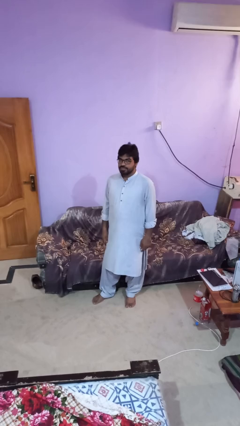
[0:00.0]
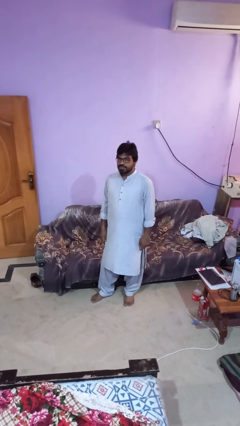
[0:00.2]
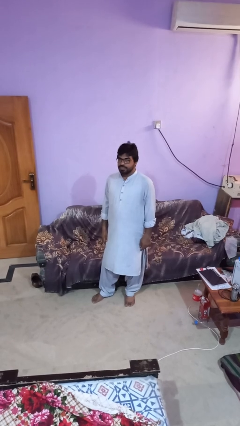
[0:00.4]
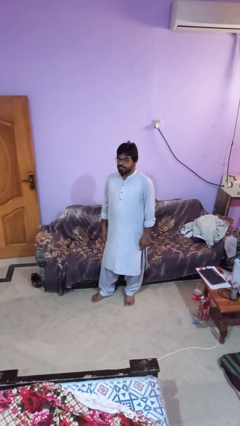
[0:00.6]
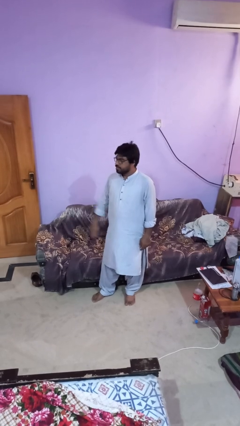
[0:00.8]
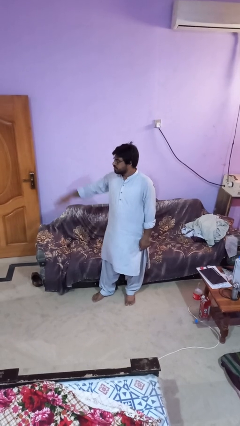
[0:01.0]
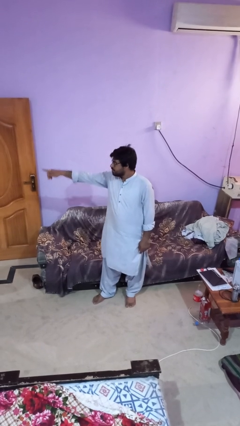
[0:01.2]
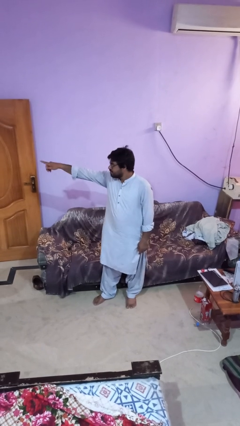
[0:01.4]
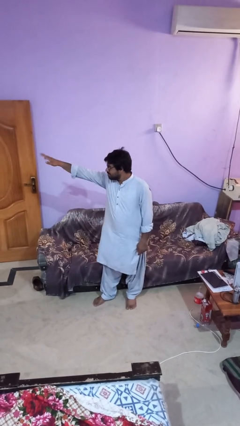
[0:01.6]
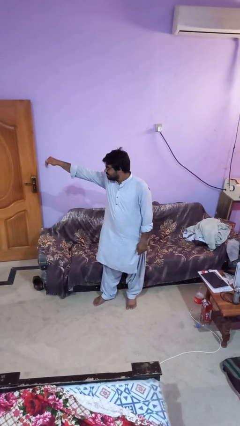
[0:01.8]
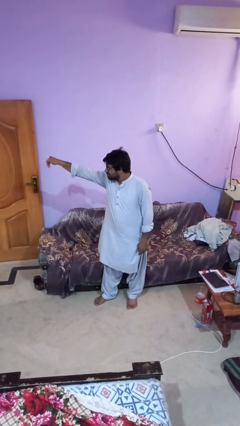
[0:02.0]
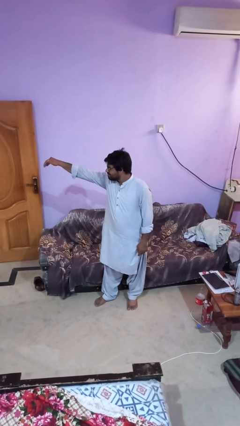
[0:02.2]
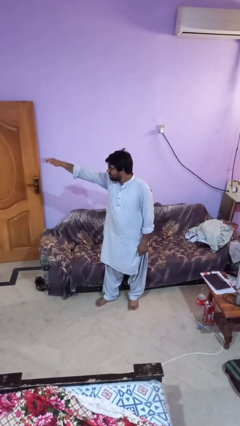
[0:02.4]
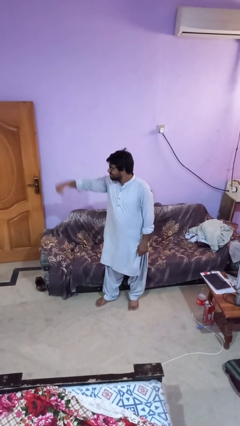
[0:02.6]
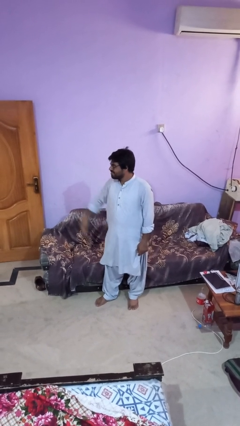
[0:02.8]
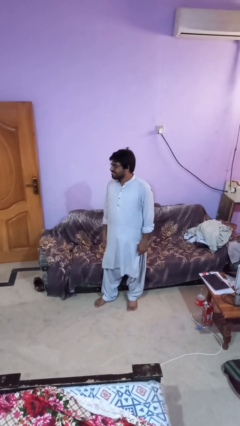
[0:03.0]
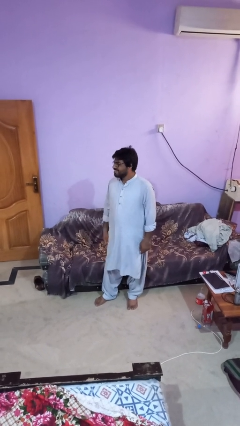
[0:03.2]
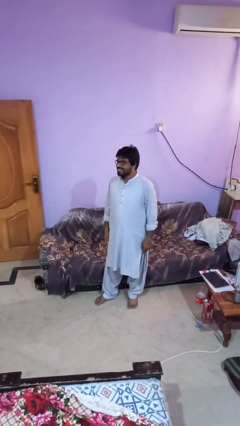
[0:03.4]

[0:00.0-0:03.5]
person gestures come here

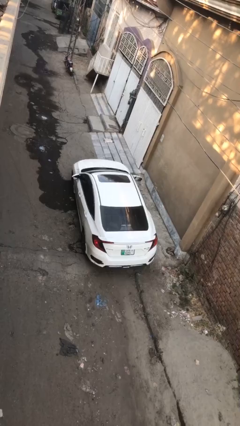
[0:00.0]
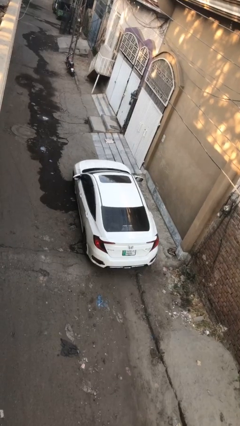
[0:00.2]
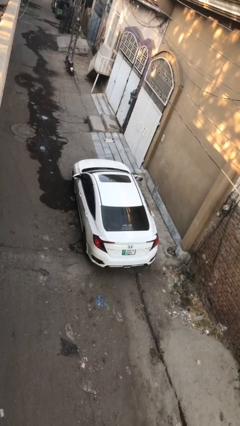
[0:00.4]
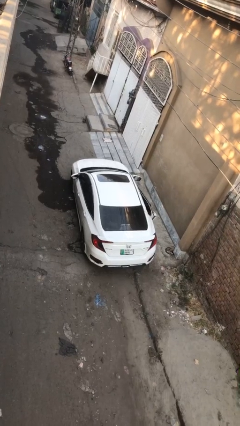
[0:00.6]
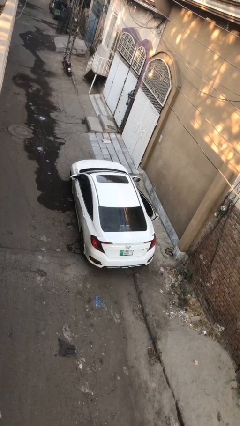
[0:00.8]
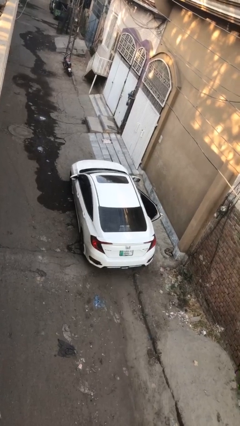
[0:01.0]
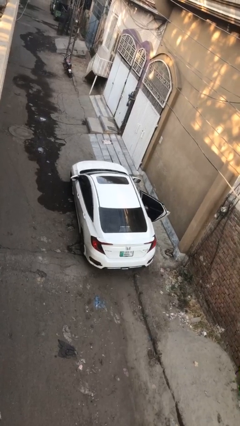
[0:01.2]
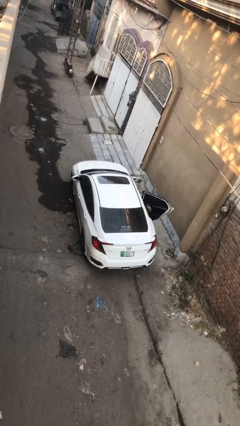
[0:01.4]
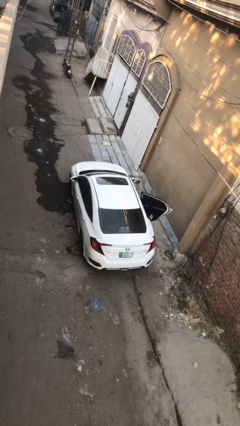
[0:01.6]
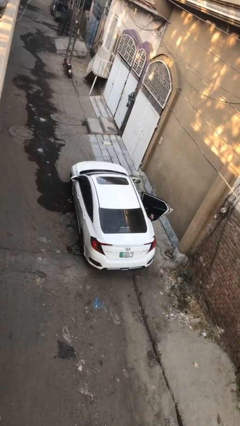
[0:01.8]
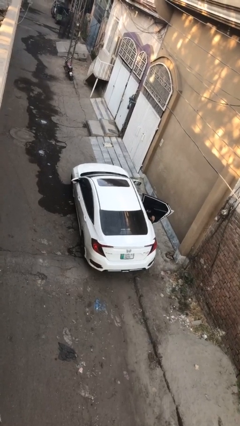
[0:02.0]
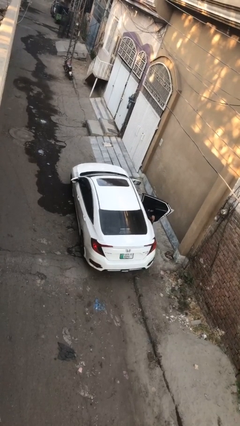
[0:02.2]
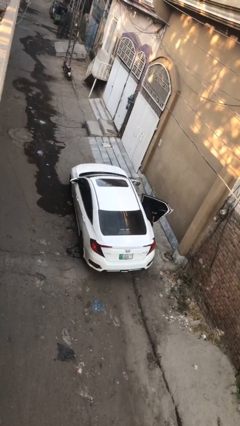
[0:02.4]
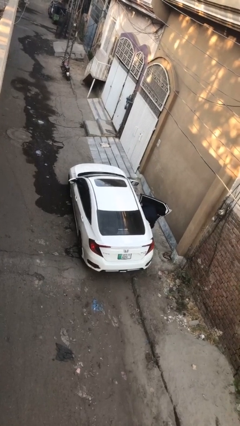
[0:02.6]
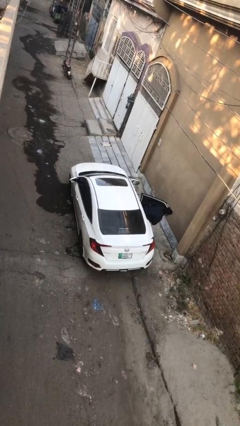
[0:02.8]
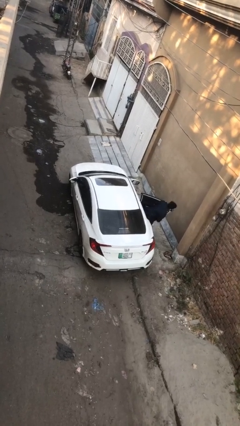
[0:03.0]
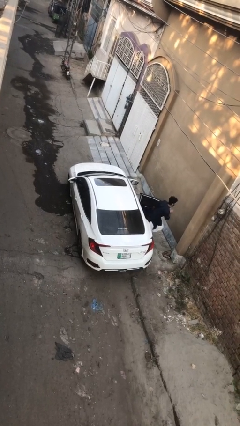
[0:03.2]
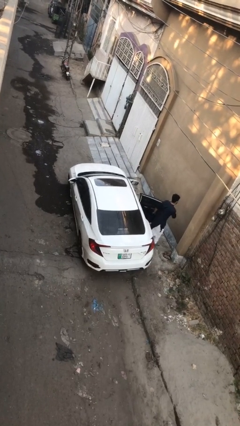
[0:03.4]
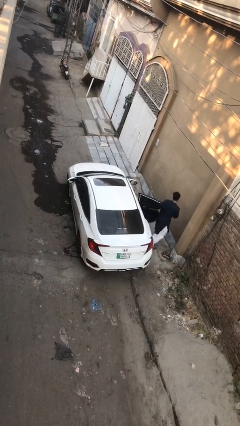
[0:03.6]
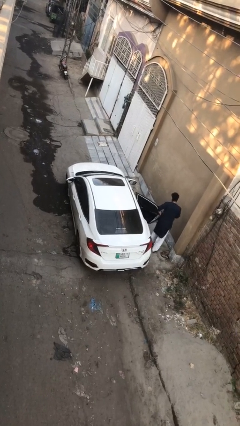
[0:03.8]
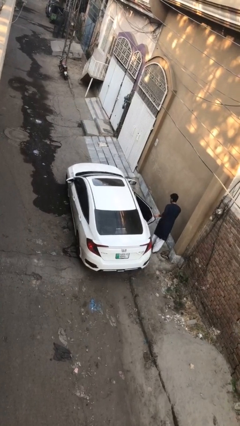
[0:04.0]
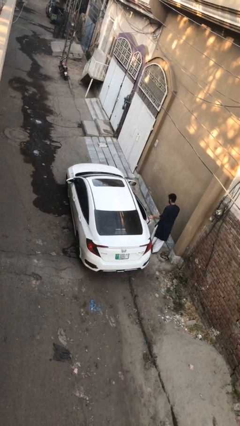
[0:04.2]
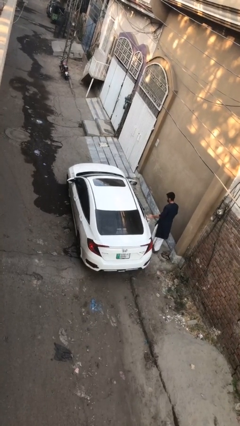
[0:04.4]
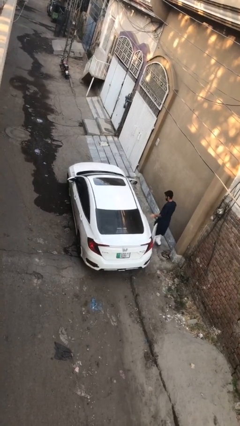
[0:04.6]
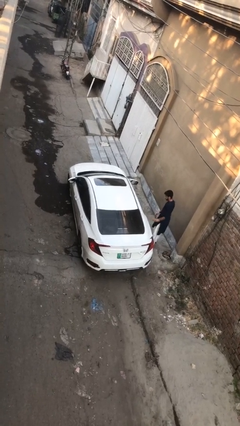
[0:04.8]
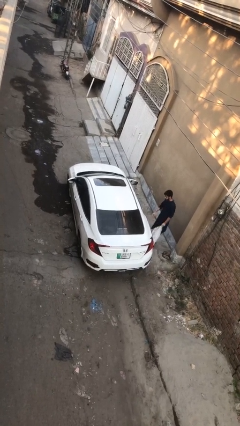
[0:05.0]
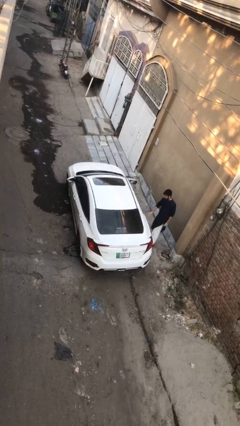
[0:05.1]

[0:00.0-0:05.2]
car drops off person

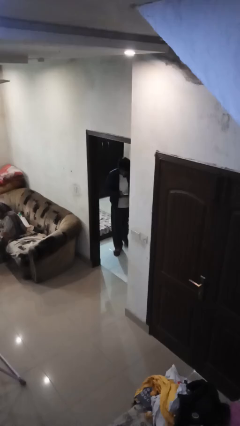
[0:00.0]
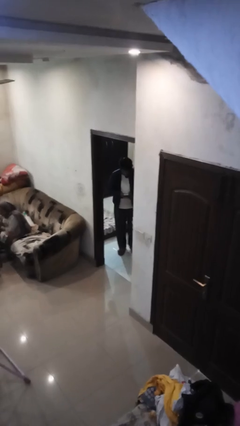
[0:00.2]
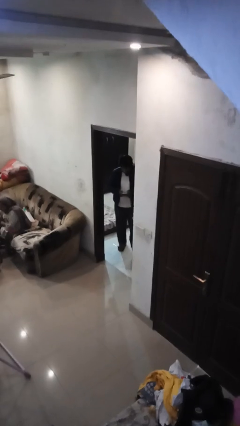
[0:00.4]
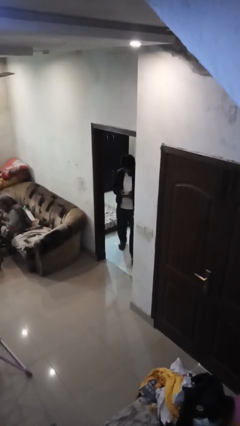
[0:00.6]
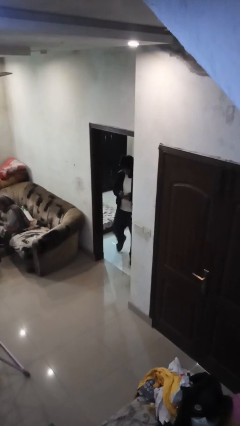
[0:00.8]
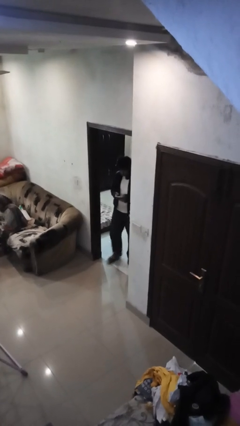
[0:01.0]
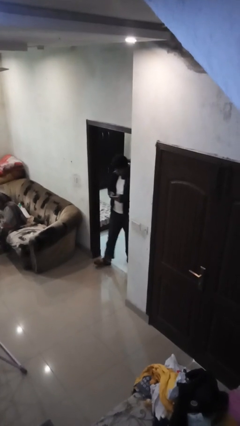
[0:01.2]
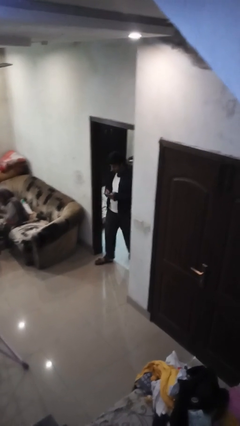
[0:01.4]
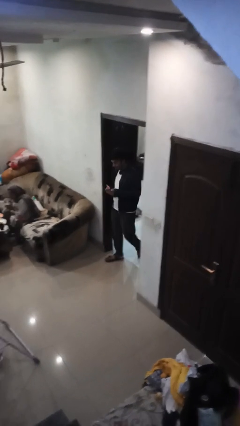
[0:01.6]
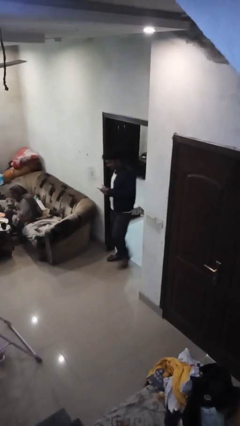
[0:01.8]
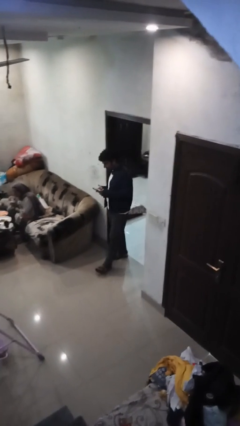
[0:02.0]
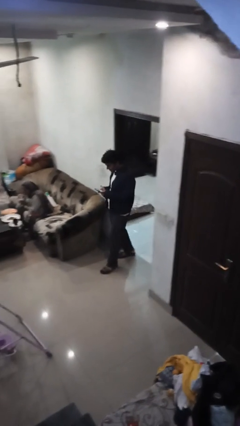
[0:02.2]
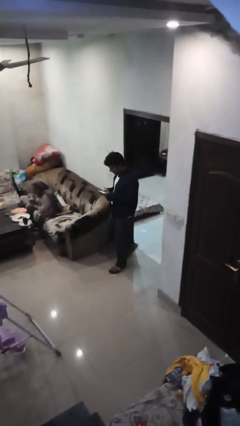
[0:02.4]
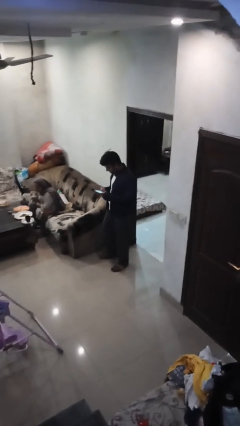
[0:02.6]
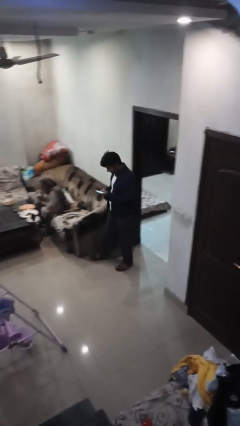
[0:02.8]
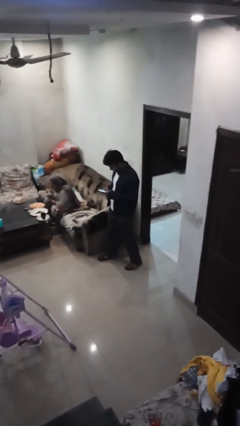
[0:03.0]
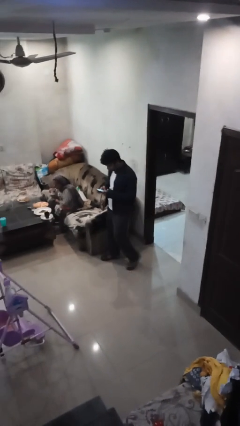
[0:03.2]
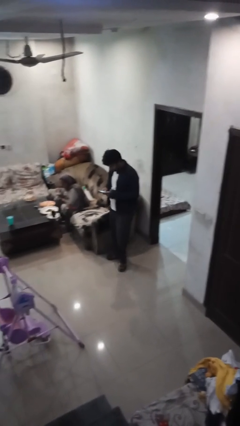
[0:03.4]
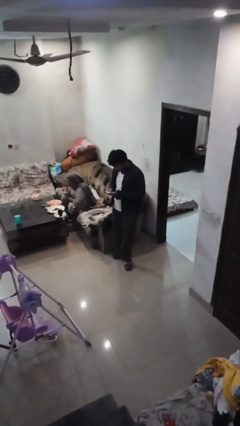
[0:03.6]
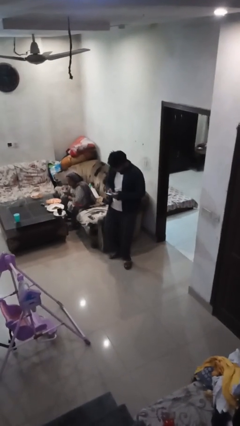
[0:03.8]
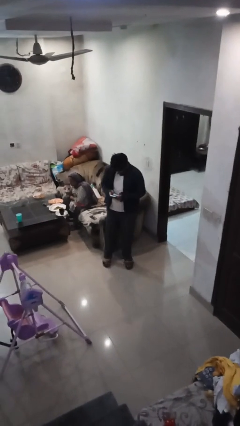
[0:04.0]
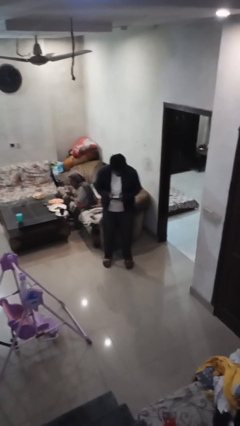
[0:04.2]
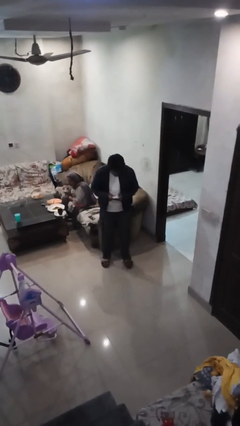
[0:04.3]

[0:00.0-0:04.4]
person enters scene through structure

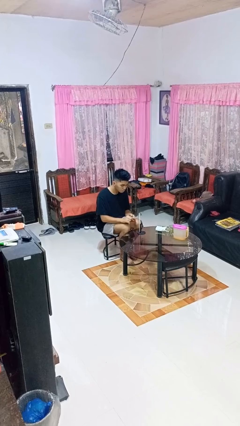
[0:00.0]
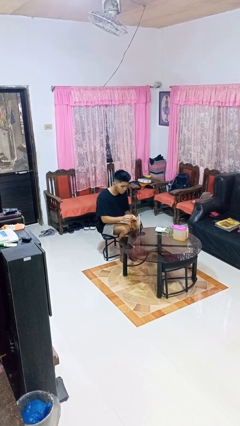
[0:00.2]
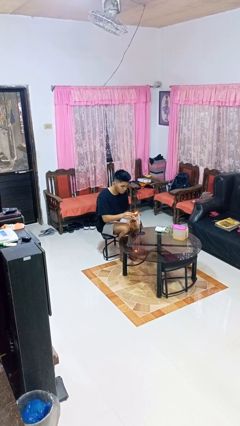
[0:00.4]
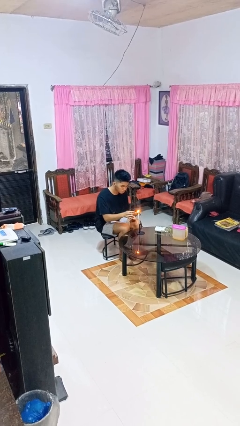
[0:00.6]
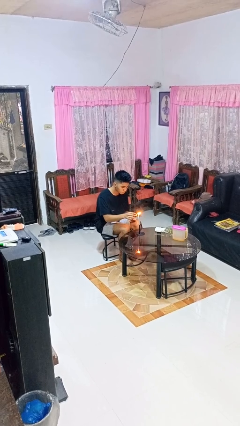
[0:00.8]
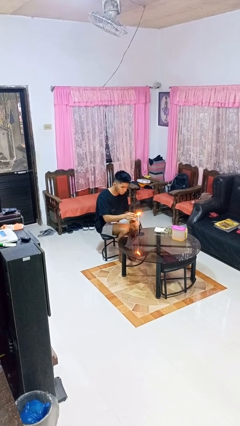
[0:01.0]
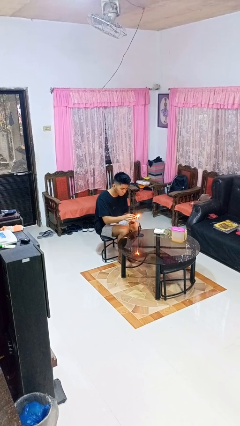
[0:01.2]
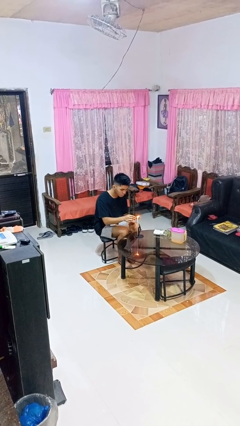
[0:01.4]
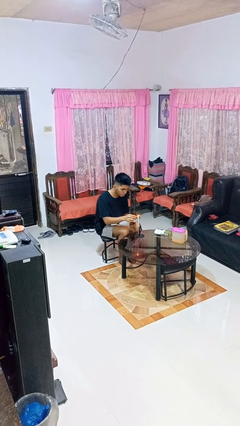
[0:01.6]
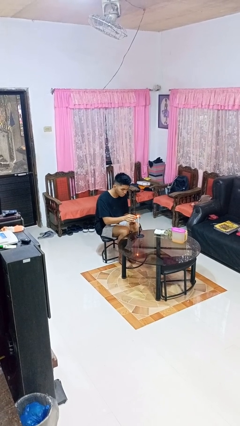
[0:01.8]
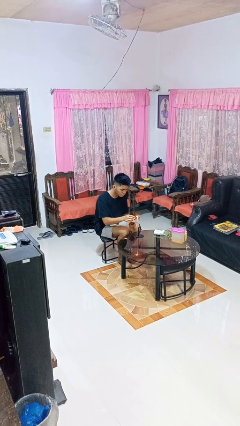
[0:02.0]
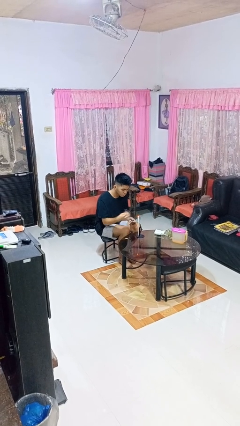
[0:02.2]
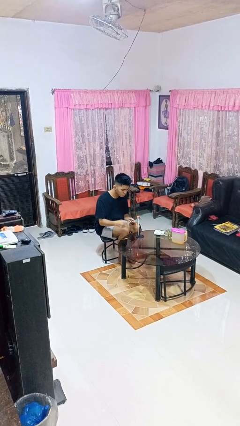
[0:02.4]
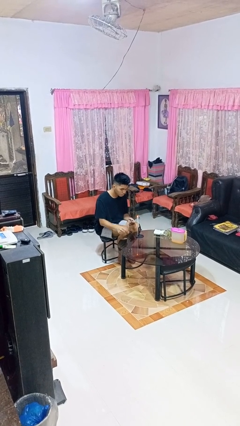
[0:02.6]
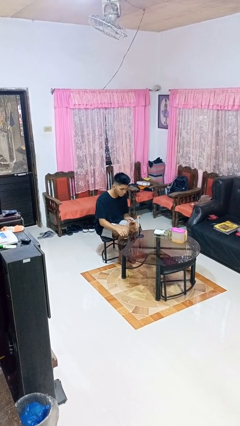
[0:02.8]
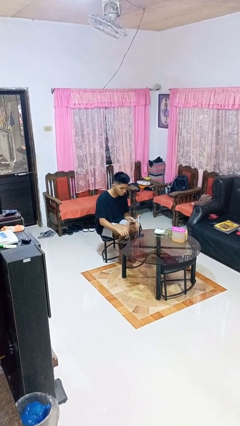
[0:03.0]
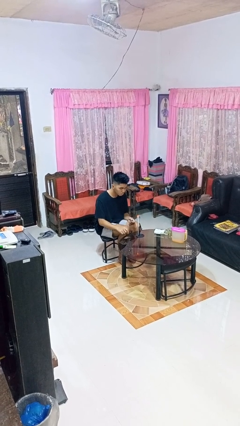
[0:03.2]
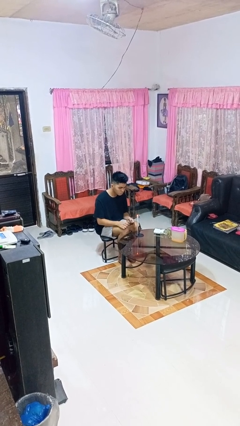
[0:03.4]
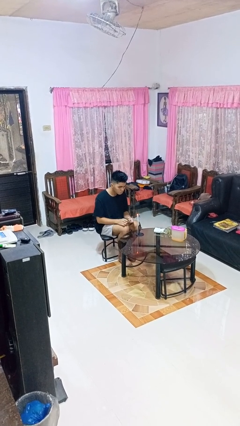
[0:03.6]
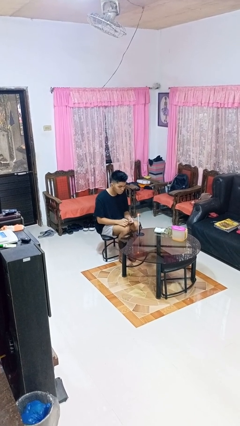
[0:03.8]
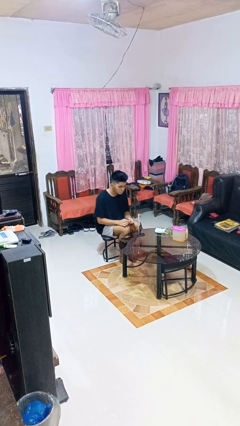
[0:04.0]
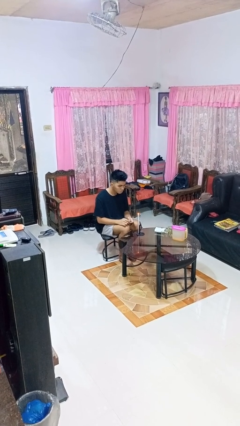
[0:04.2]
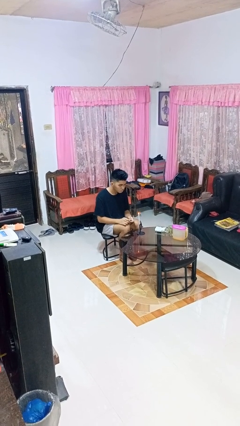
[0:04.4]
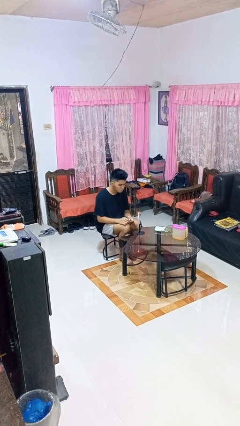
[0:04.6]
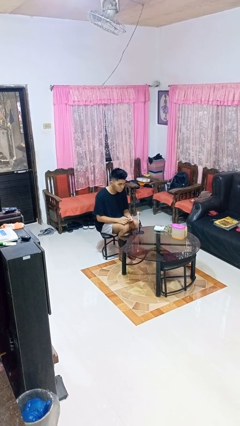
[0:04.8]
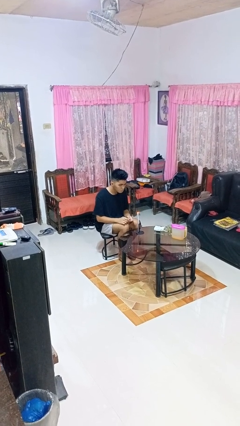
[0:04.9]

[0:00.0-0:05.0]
person lights candle
